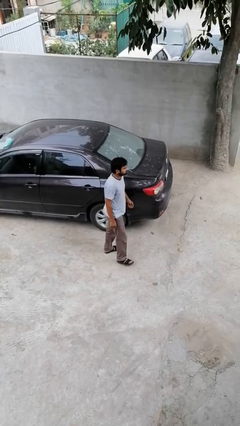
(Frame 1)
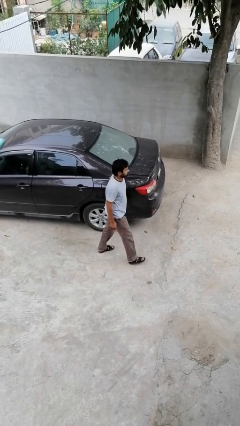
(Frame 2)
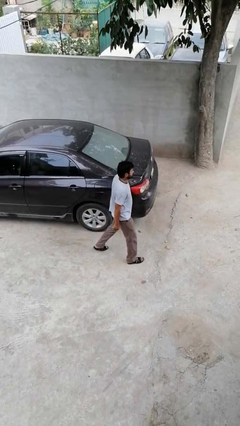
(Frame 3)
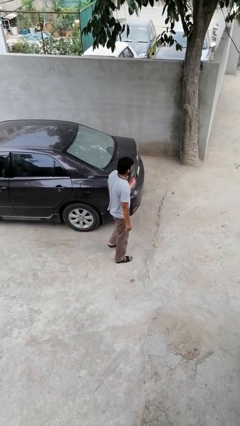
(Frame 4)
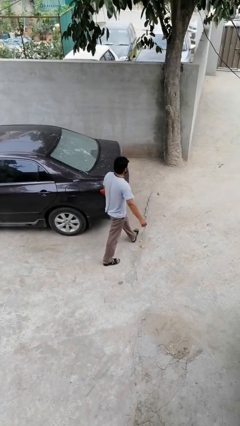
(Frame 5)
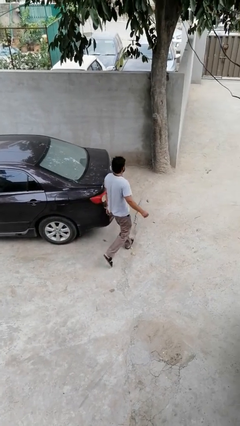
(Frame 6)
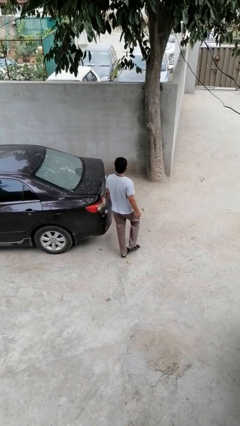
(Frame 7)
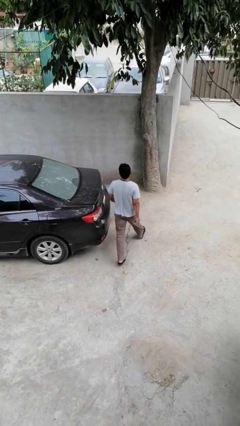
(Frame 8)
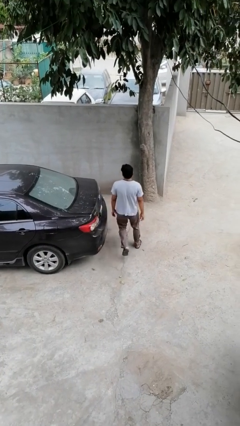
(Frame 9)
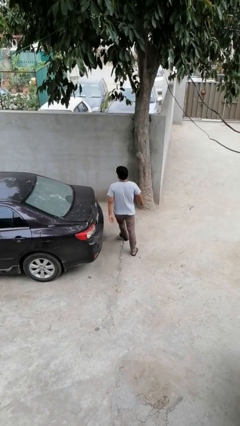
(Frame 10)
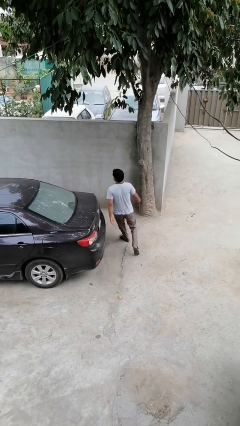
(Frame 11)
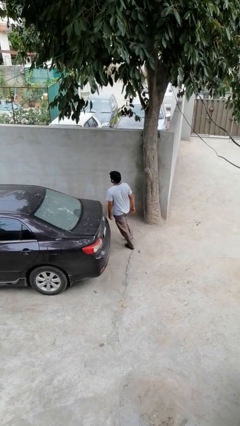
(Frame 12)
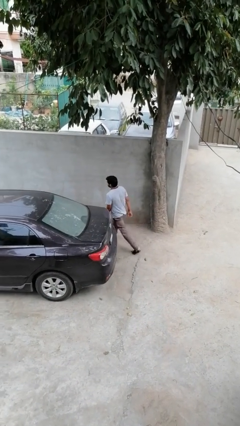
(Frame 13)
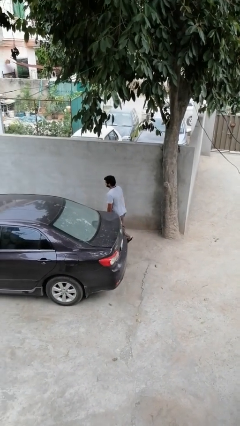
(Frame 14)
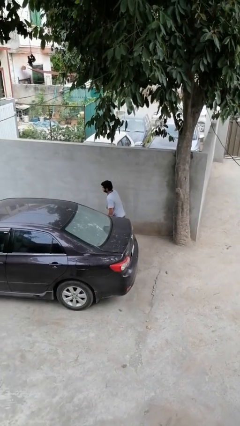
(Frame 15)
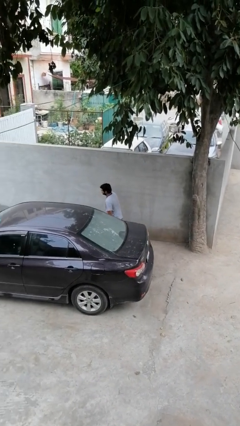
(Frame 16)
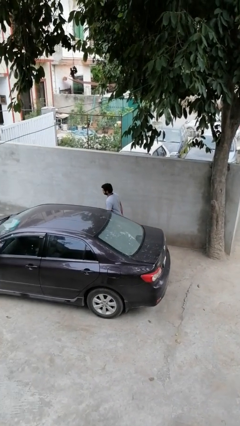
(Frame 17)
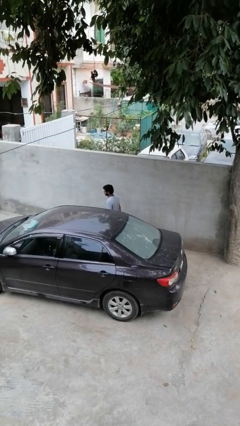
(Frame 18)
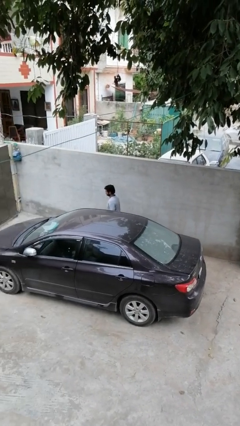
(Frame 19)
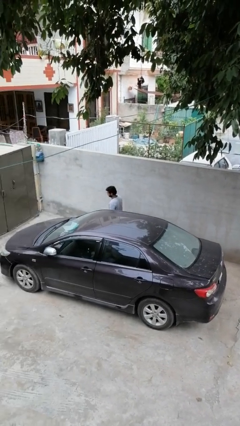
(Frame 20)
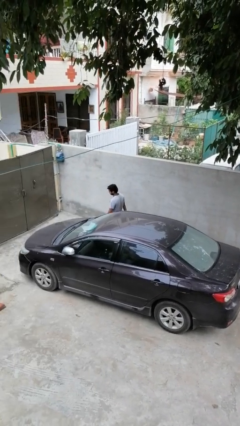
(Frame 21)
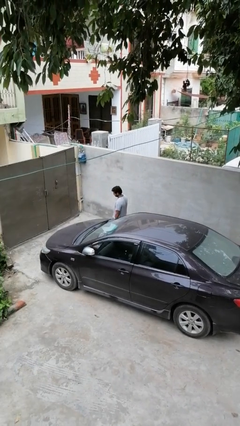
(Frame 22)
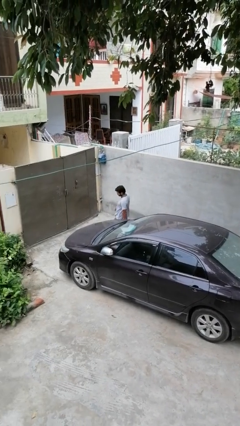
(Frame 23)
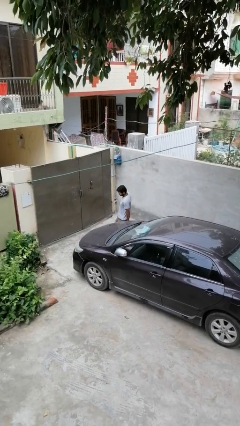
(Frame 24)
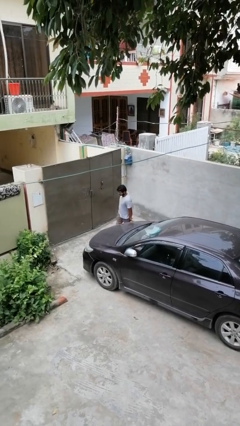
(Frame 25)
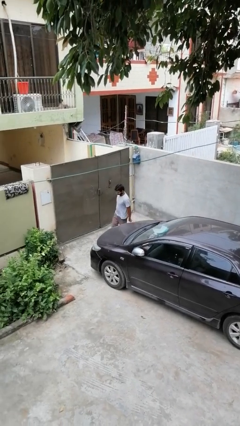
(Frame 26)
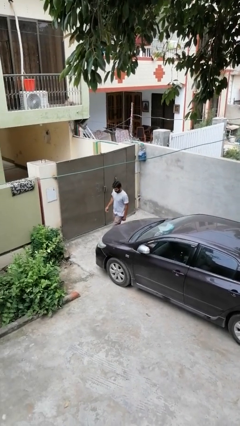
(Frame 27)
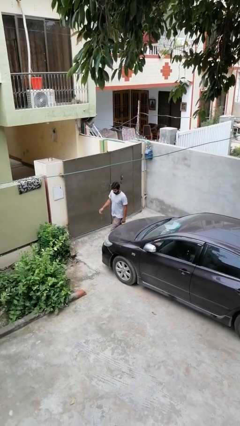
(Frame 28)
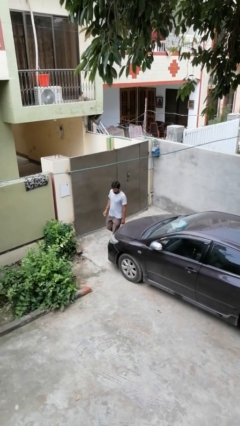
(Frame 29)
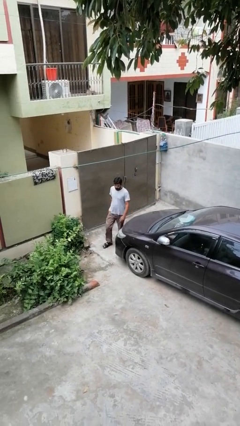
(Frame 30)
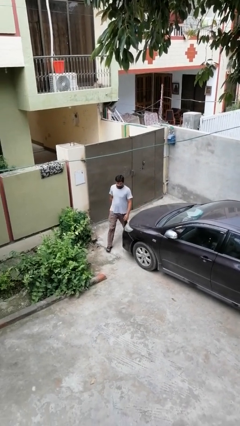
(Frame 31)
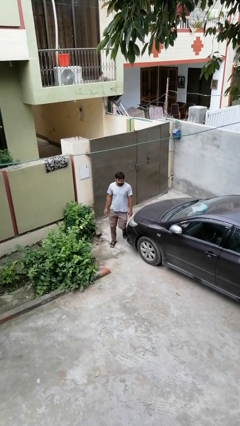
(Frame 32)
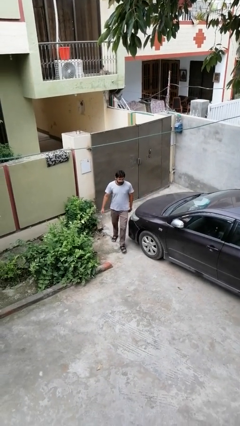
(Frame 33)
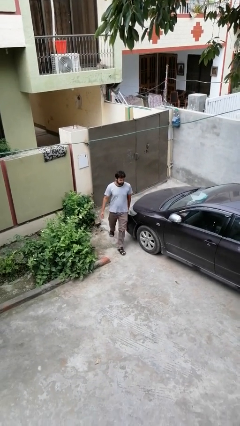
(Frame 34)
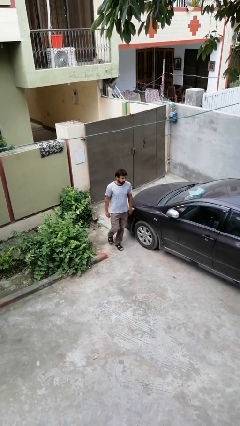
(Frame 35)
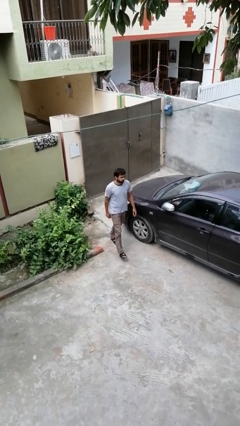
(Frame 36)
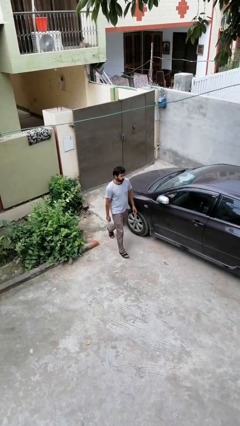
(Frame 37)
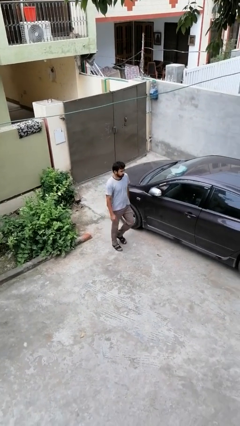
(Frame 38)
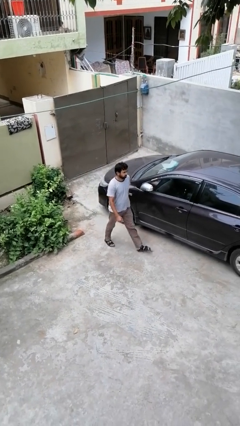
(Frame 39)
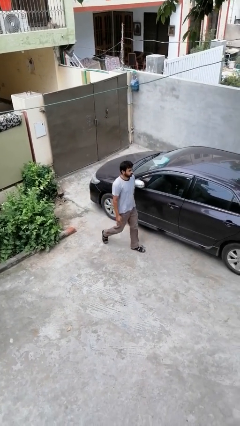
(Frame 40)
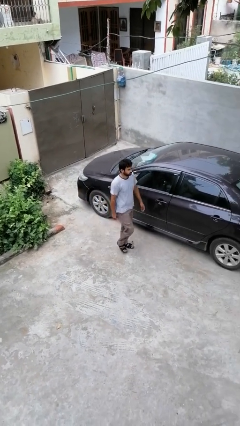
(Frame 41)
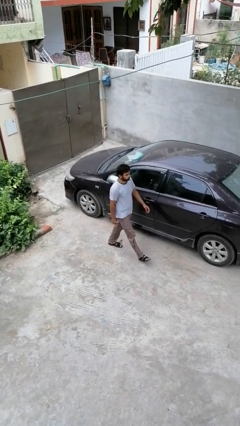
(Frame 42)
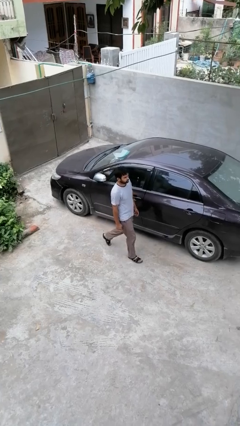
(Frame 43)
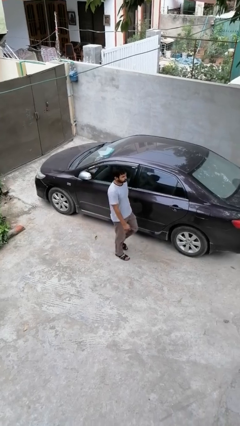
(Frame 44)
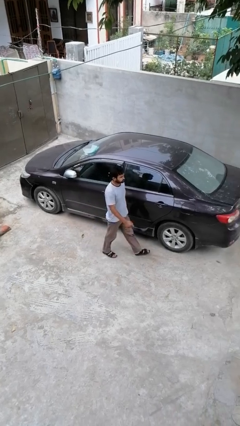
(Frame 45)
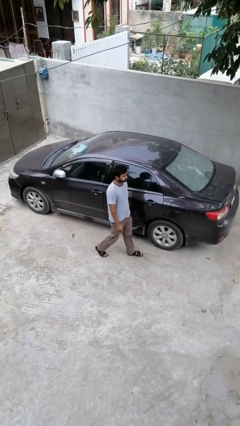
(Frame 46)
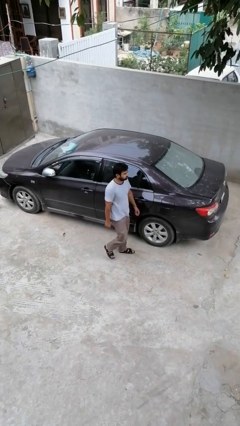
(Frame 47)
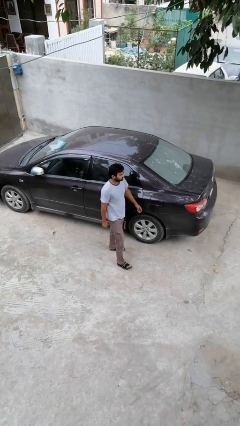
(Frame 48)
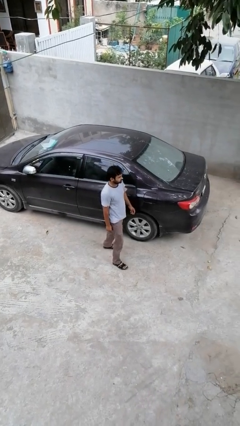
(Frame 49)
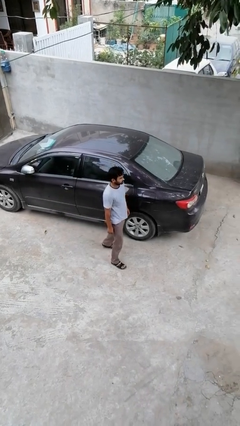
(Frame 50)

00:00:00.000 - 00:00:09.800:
person walks around car

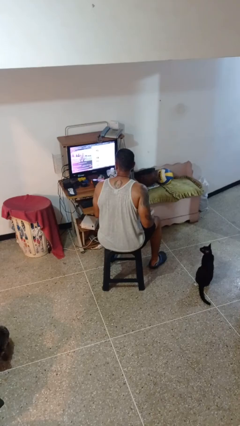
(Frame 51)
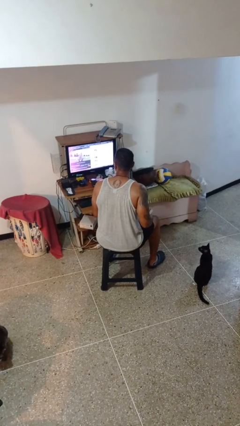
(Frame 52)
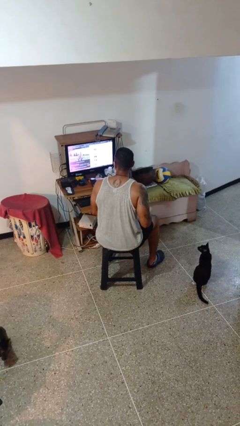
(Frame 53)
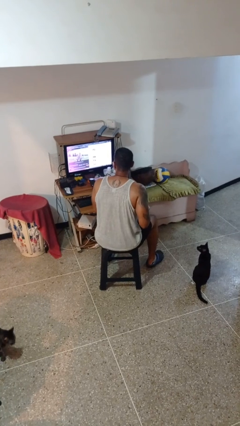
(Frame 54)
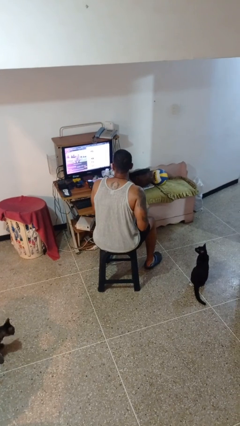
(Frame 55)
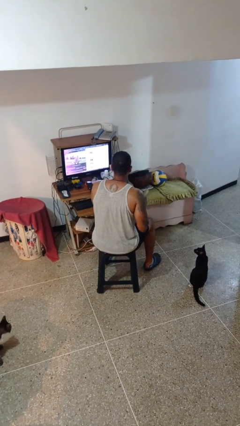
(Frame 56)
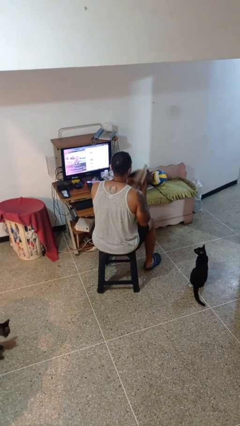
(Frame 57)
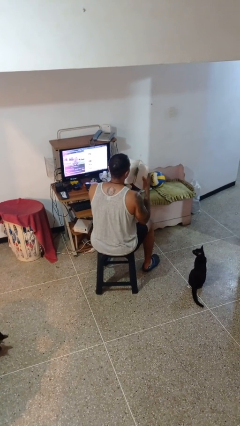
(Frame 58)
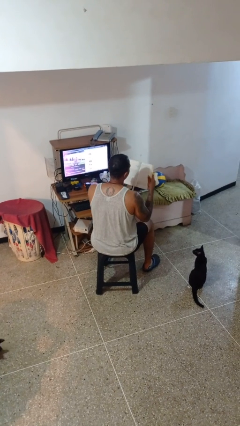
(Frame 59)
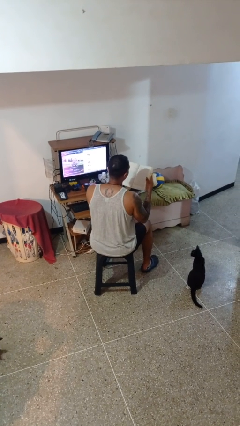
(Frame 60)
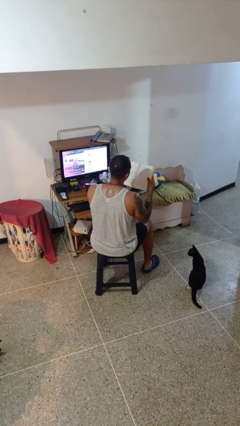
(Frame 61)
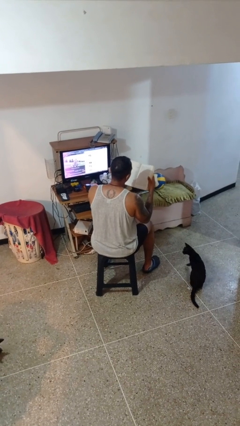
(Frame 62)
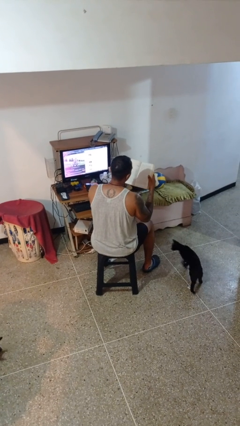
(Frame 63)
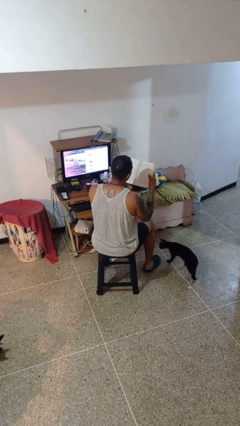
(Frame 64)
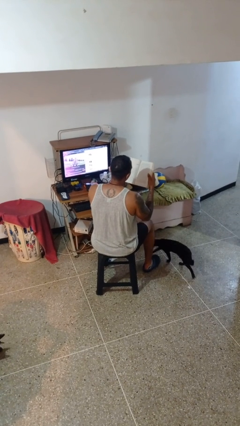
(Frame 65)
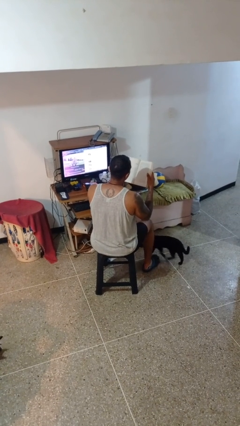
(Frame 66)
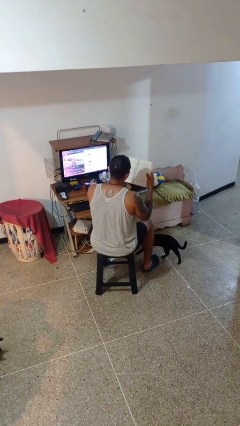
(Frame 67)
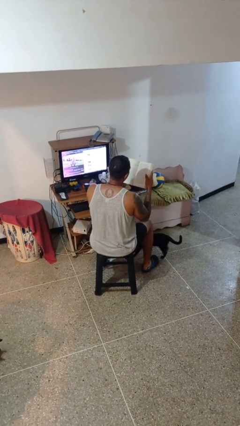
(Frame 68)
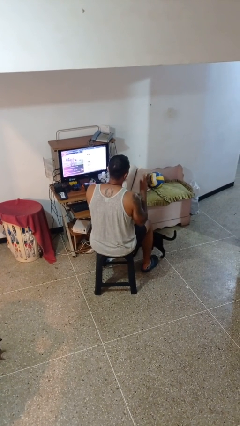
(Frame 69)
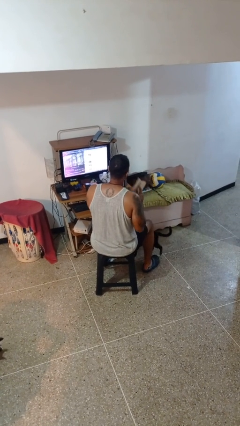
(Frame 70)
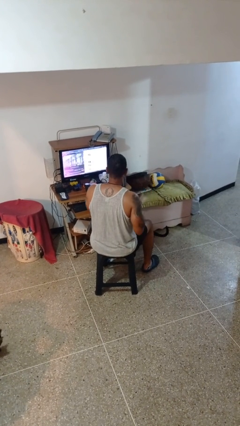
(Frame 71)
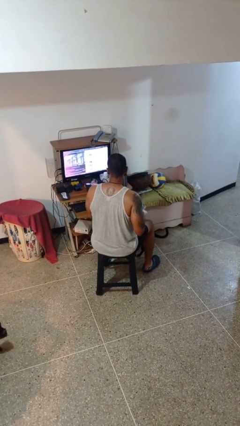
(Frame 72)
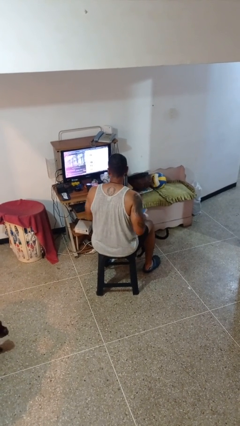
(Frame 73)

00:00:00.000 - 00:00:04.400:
person reads book

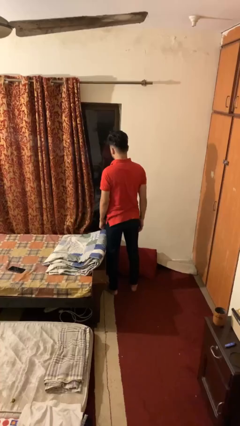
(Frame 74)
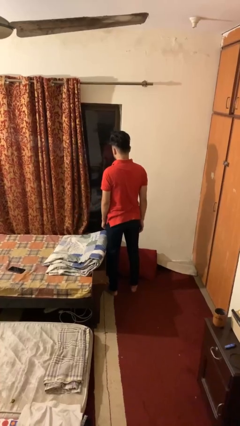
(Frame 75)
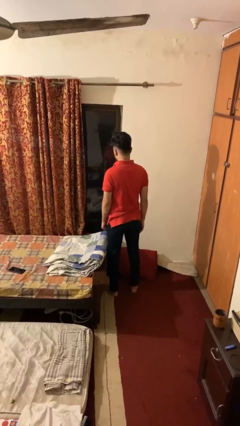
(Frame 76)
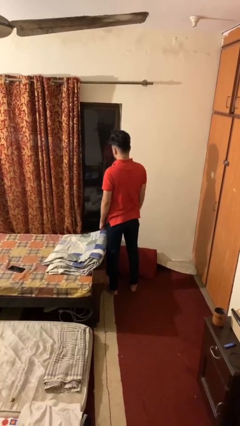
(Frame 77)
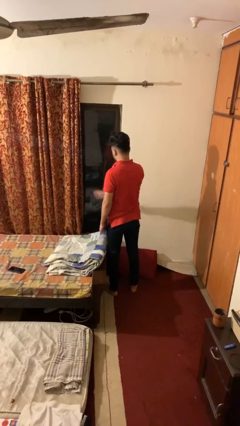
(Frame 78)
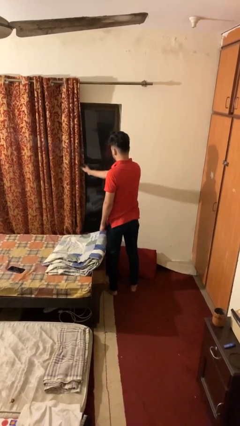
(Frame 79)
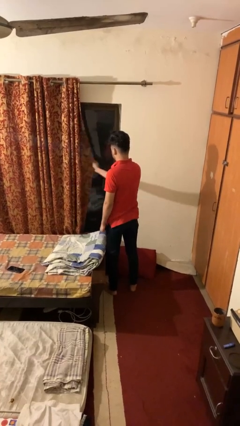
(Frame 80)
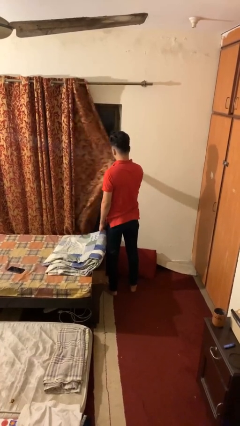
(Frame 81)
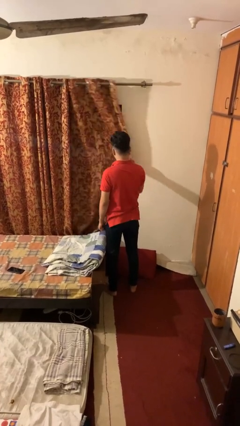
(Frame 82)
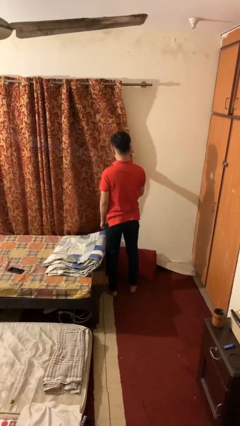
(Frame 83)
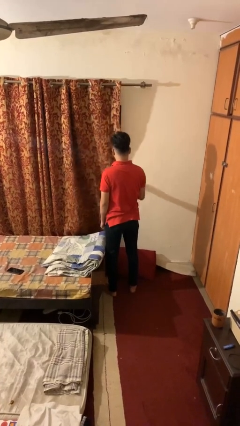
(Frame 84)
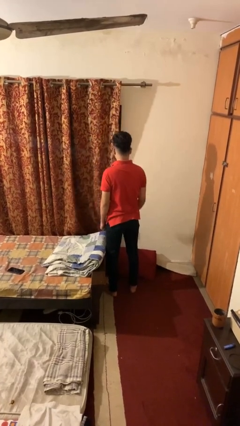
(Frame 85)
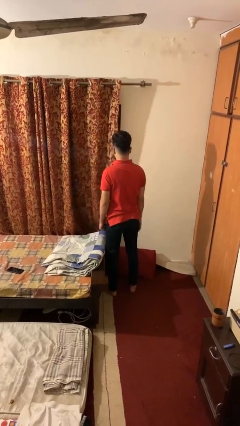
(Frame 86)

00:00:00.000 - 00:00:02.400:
person closes curtains

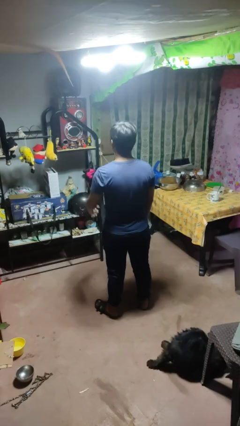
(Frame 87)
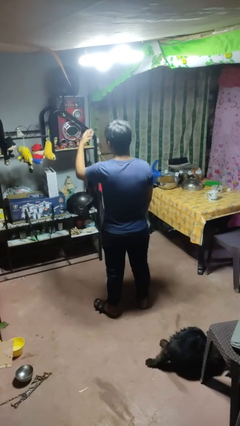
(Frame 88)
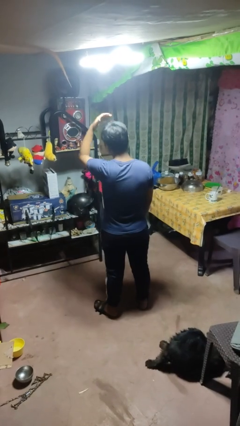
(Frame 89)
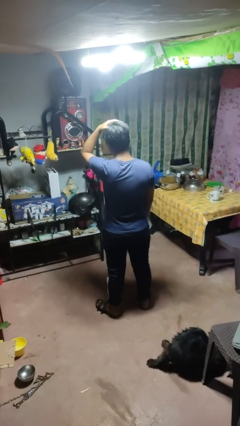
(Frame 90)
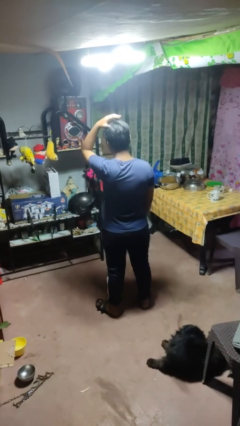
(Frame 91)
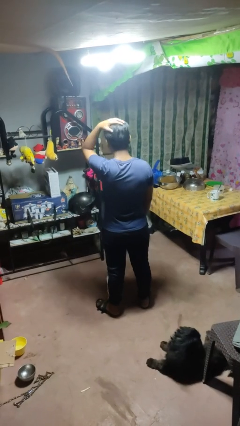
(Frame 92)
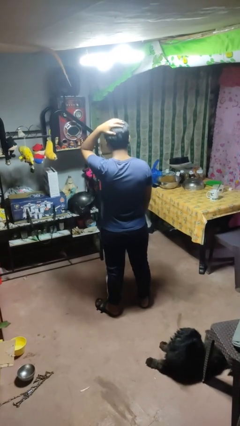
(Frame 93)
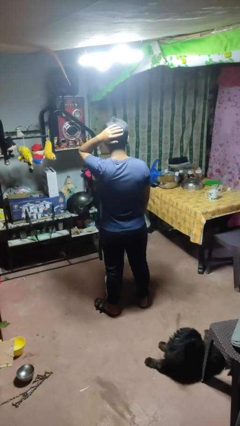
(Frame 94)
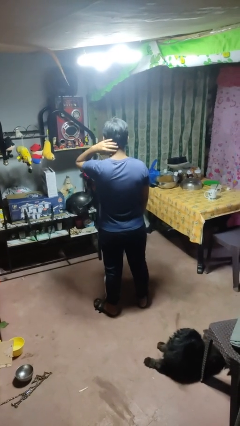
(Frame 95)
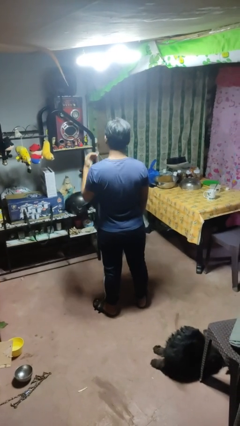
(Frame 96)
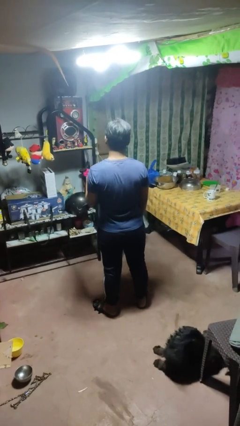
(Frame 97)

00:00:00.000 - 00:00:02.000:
person pats head
